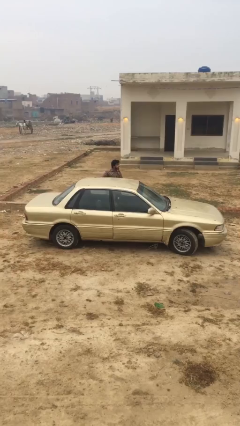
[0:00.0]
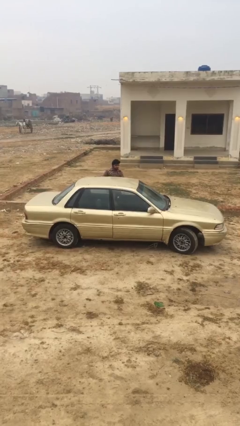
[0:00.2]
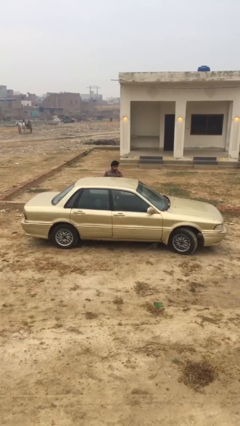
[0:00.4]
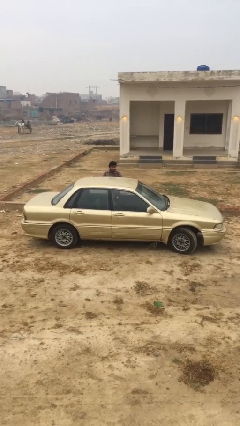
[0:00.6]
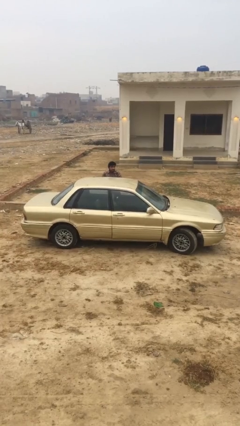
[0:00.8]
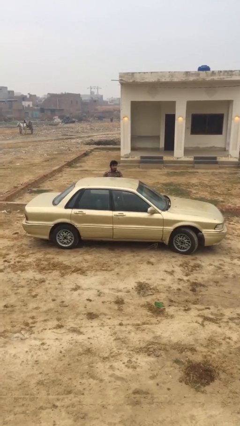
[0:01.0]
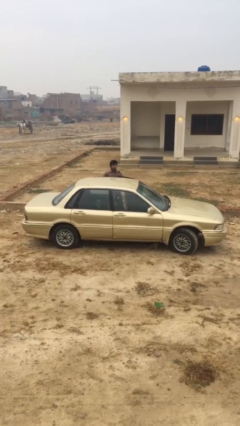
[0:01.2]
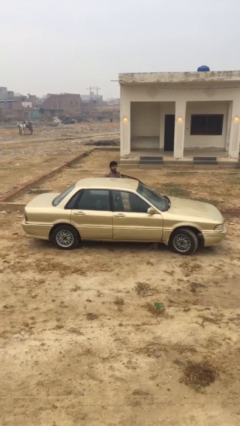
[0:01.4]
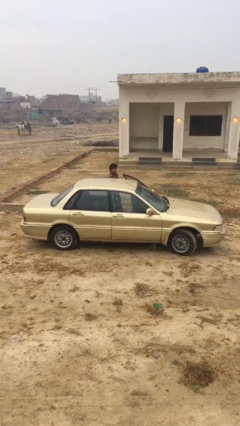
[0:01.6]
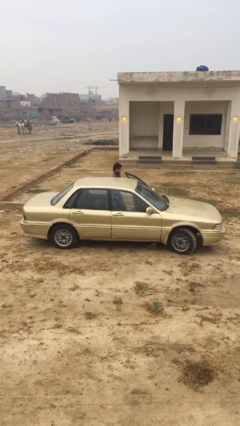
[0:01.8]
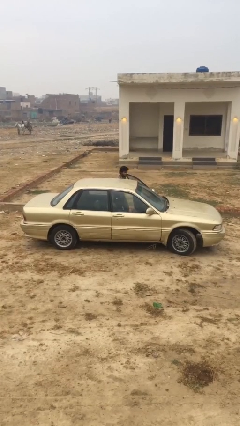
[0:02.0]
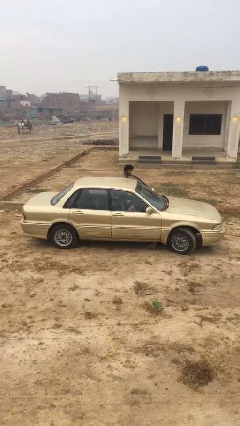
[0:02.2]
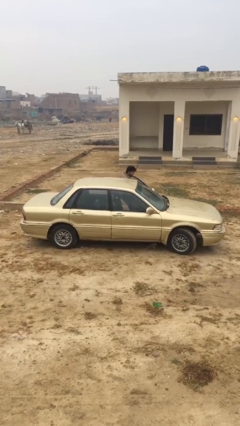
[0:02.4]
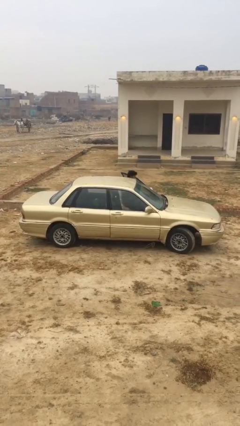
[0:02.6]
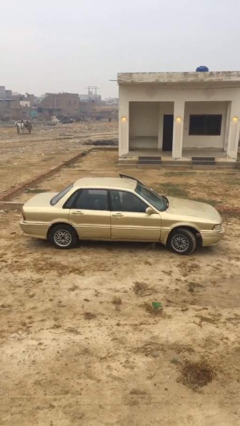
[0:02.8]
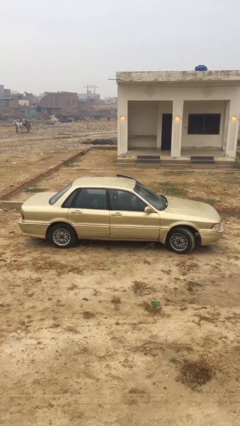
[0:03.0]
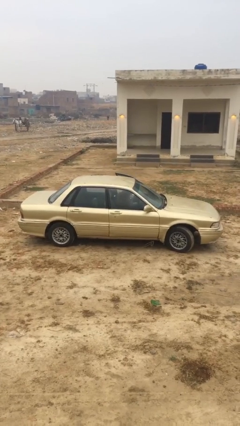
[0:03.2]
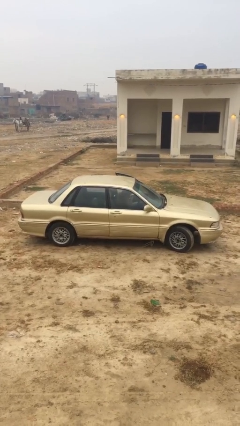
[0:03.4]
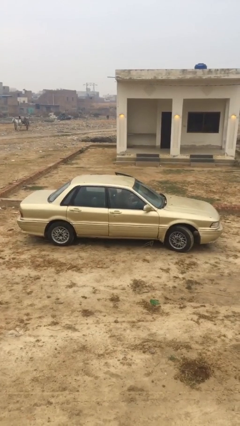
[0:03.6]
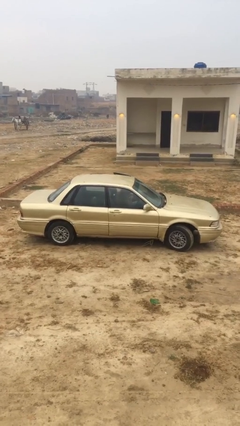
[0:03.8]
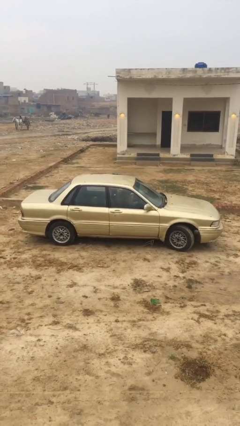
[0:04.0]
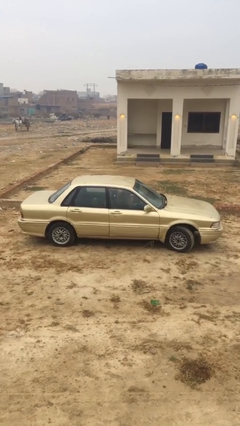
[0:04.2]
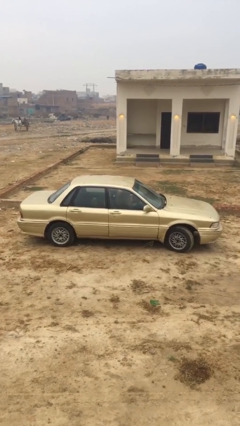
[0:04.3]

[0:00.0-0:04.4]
car picks up person

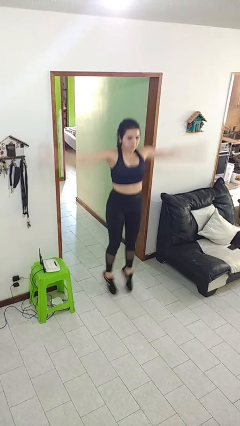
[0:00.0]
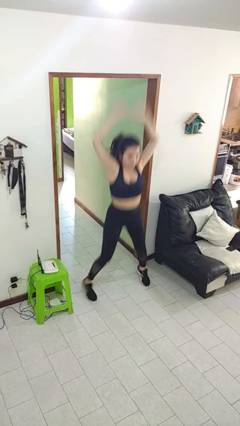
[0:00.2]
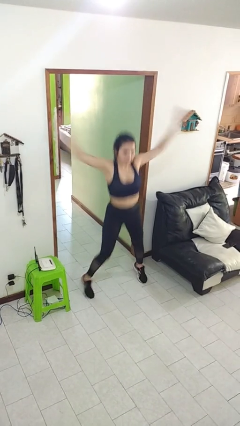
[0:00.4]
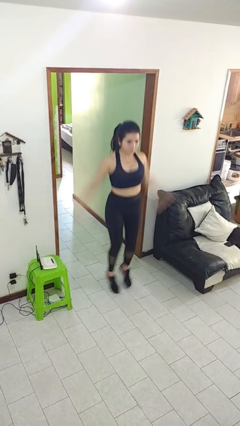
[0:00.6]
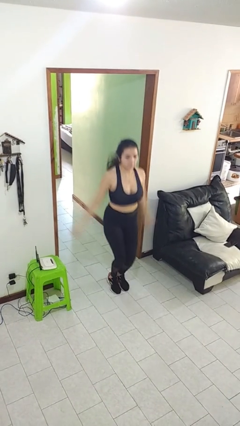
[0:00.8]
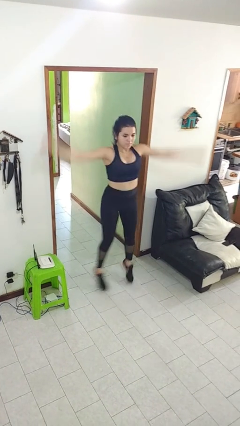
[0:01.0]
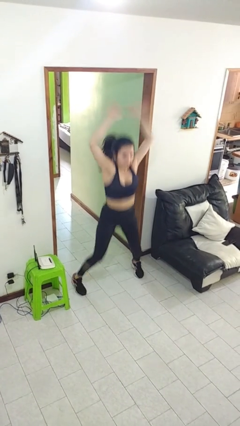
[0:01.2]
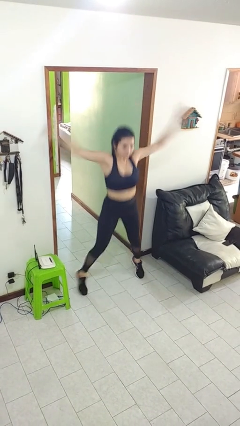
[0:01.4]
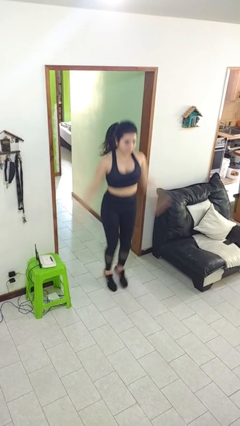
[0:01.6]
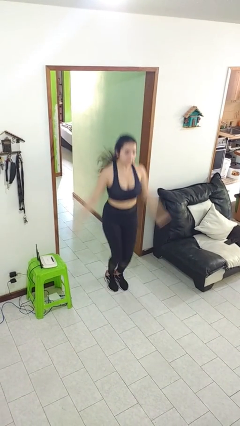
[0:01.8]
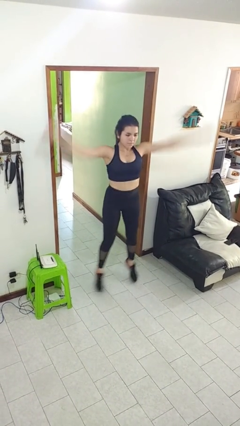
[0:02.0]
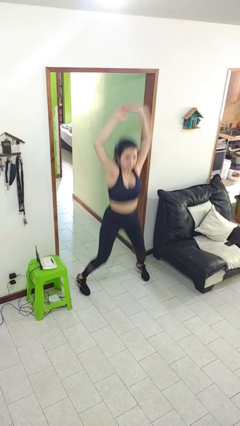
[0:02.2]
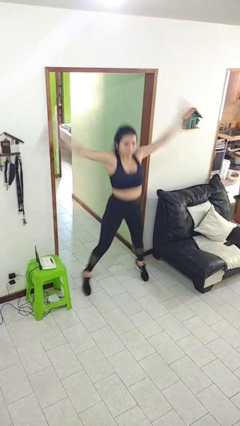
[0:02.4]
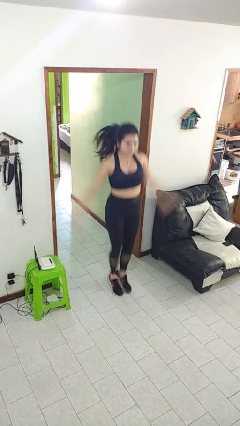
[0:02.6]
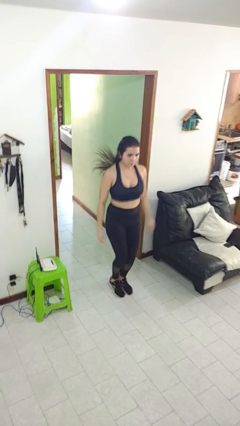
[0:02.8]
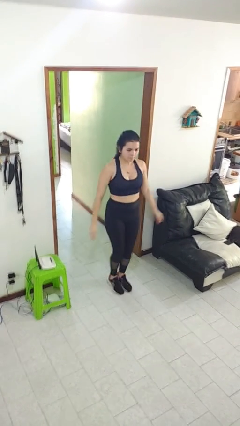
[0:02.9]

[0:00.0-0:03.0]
person exercises with jumping jacks

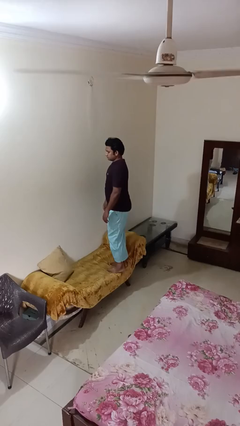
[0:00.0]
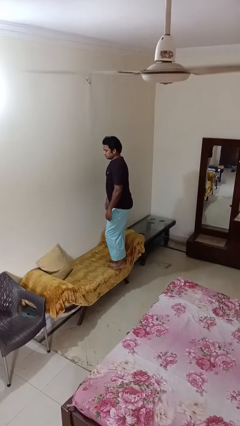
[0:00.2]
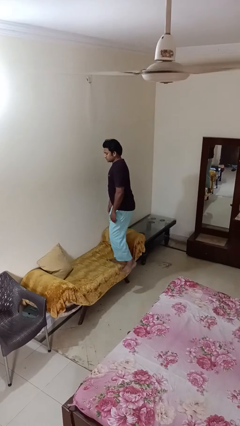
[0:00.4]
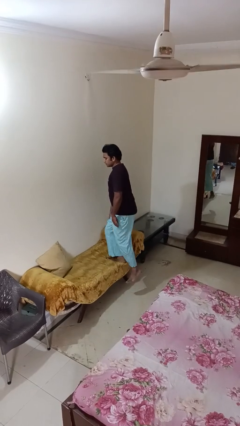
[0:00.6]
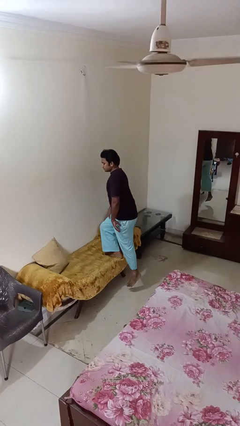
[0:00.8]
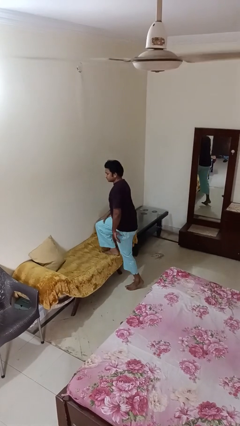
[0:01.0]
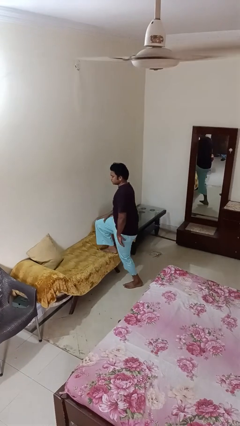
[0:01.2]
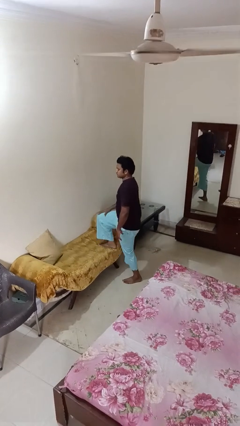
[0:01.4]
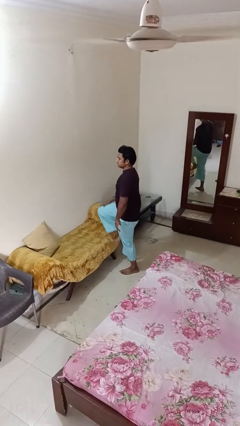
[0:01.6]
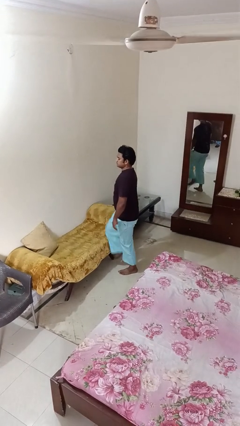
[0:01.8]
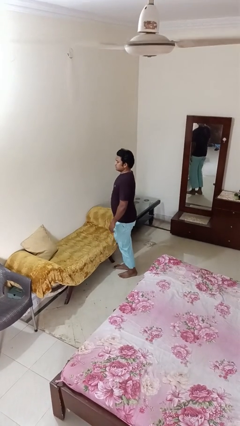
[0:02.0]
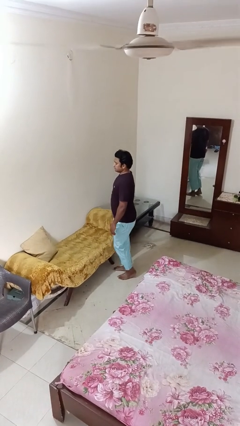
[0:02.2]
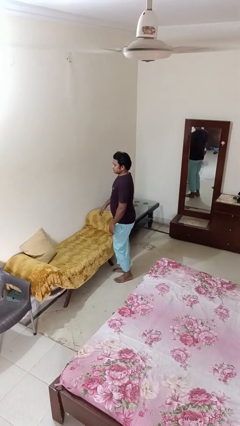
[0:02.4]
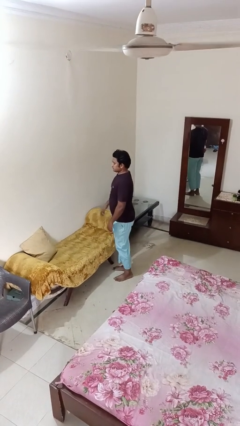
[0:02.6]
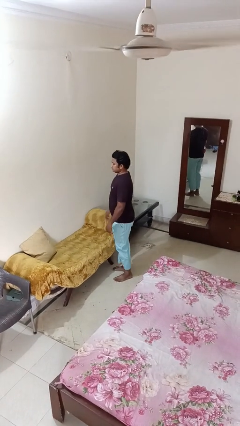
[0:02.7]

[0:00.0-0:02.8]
person climbs off couch

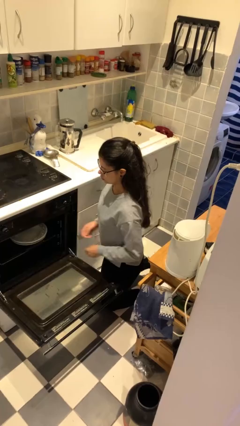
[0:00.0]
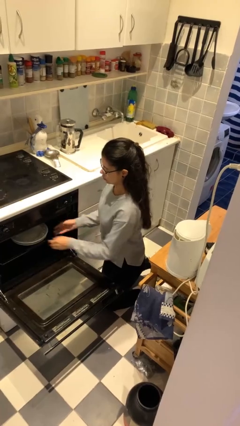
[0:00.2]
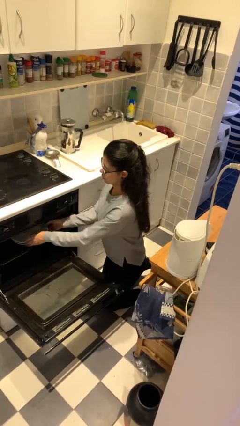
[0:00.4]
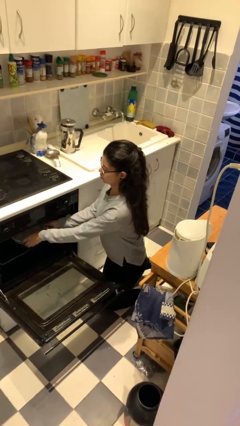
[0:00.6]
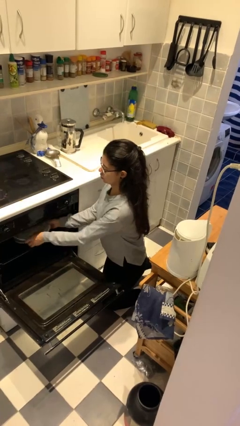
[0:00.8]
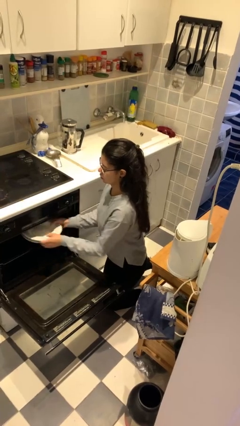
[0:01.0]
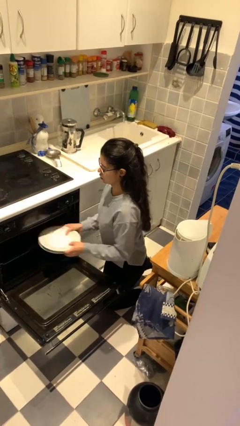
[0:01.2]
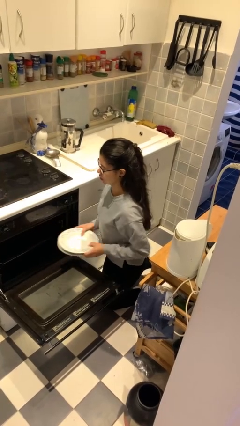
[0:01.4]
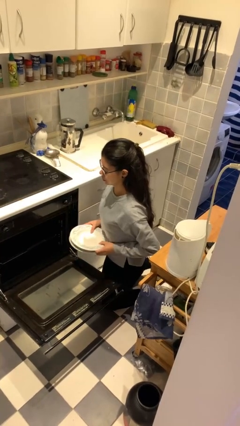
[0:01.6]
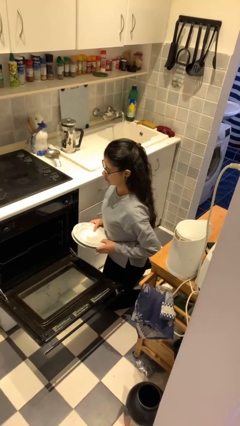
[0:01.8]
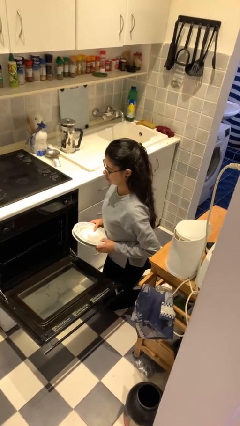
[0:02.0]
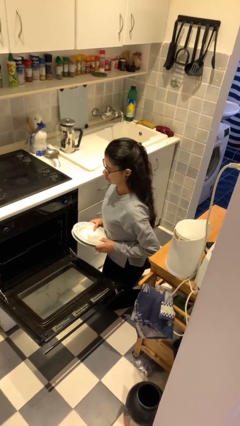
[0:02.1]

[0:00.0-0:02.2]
person unloads dishwasher

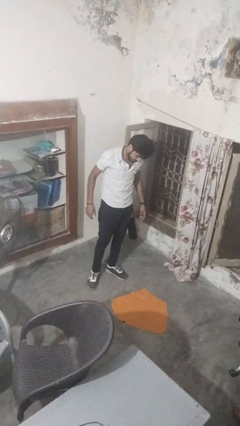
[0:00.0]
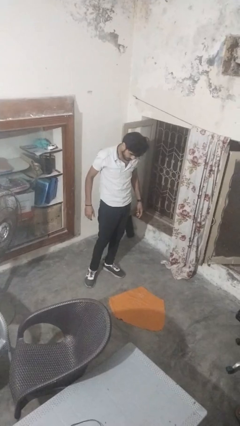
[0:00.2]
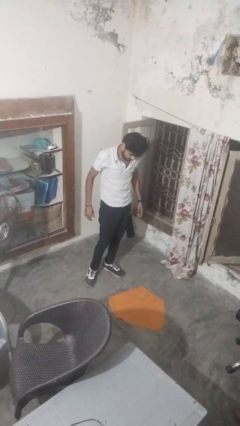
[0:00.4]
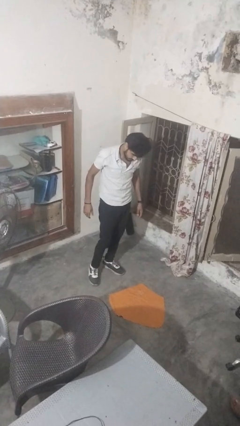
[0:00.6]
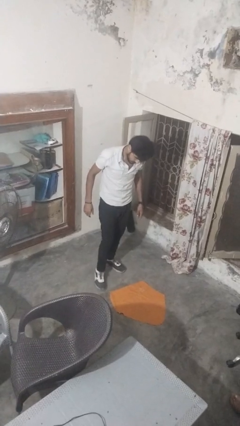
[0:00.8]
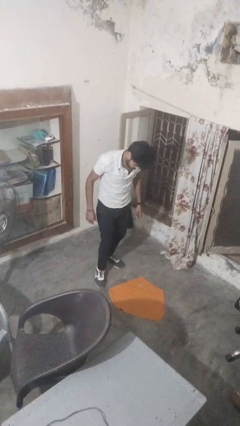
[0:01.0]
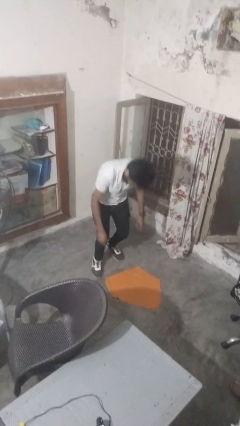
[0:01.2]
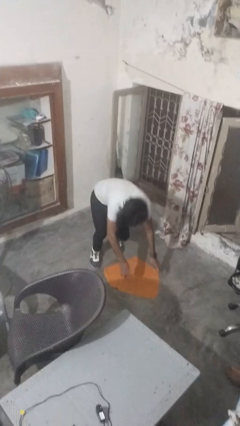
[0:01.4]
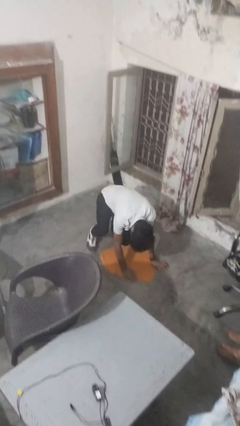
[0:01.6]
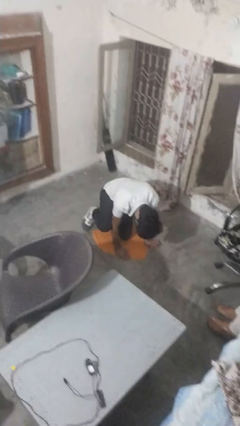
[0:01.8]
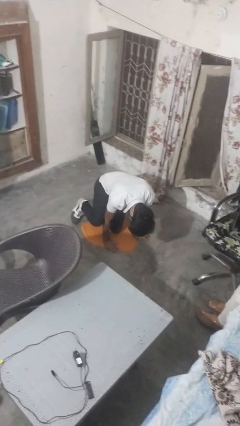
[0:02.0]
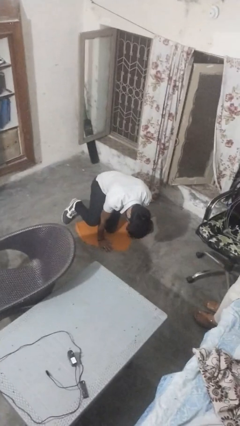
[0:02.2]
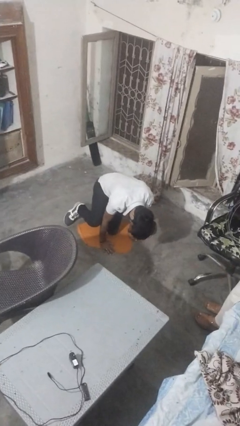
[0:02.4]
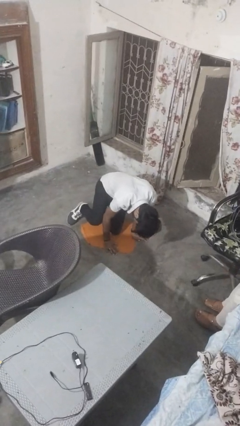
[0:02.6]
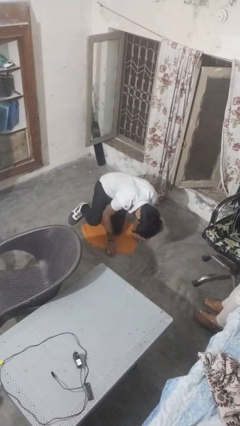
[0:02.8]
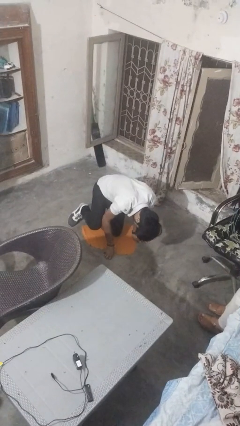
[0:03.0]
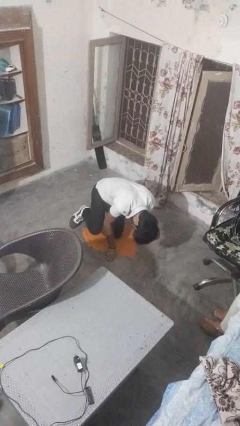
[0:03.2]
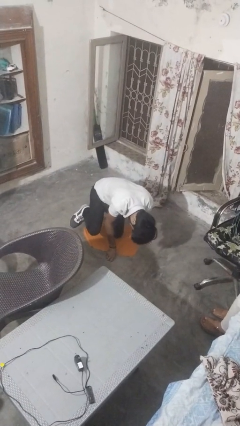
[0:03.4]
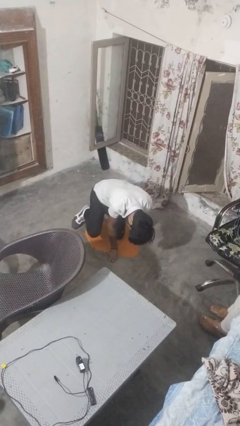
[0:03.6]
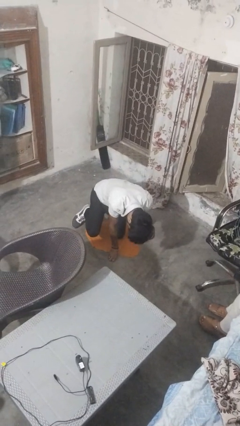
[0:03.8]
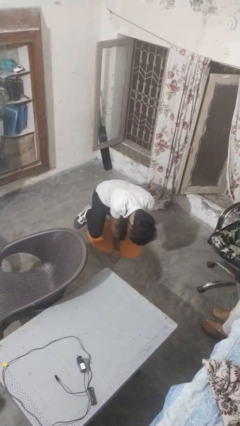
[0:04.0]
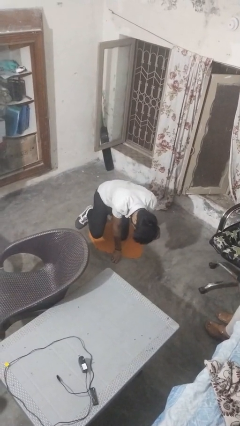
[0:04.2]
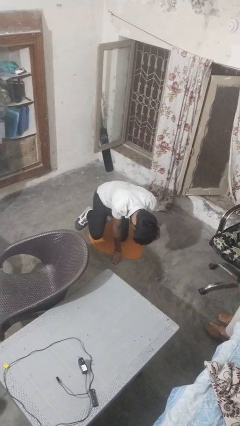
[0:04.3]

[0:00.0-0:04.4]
person falls while standing

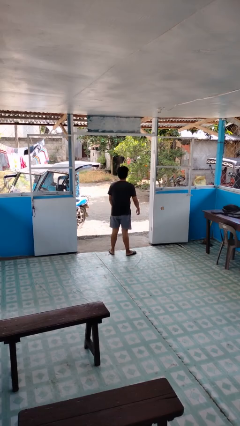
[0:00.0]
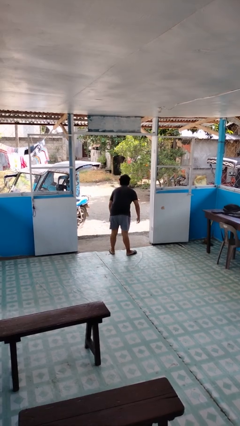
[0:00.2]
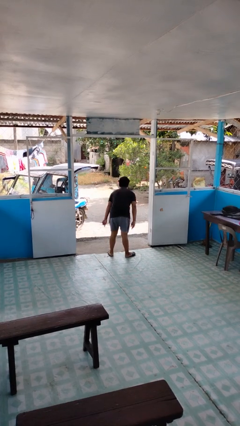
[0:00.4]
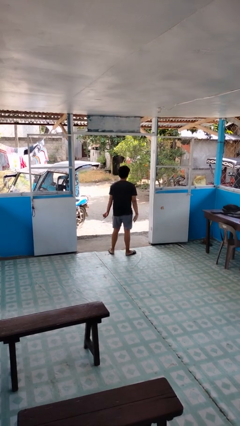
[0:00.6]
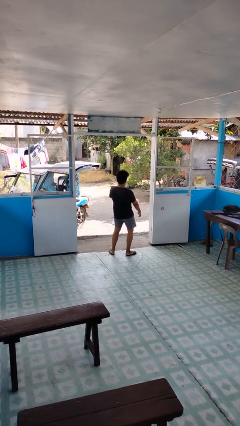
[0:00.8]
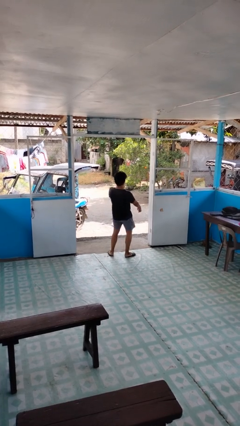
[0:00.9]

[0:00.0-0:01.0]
person wiggles hips
